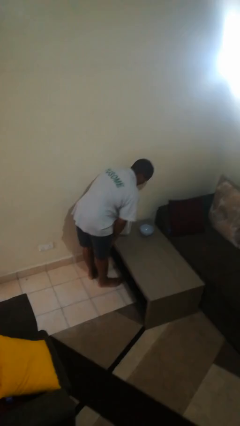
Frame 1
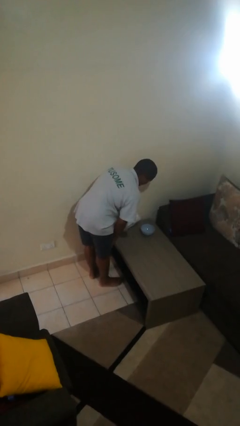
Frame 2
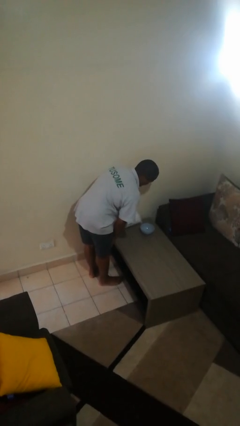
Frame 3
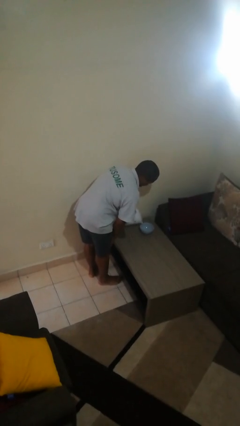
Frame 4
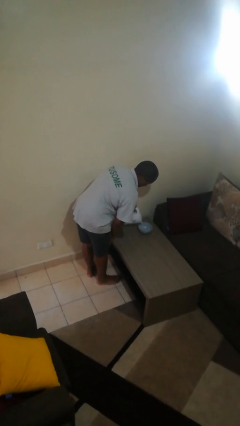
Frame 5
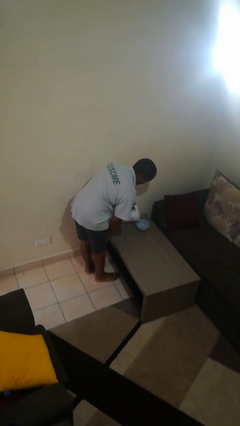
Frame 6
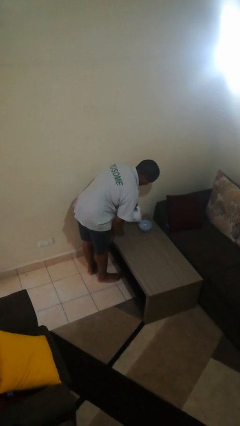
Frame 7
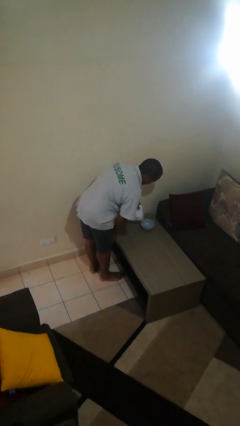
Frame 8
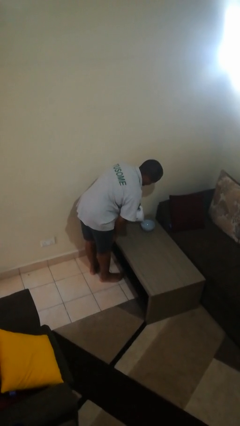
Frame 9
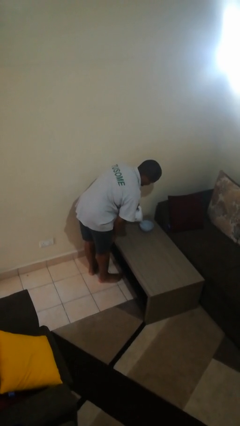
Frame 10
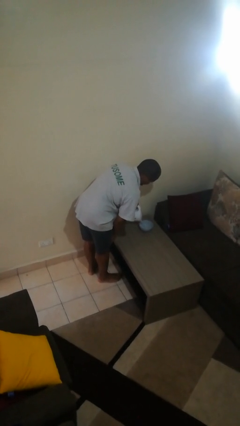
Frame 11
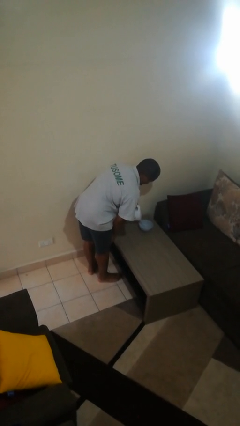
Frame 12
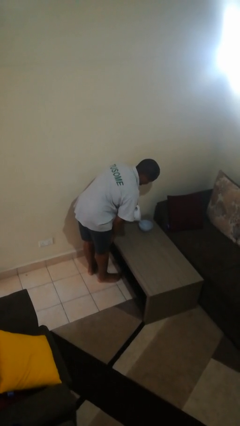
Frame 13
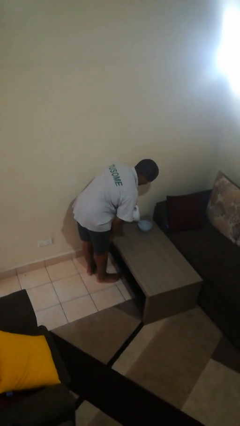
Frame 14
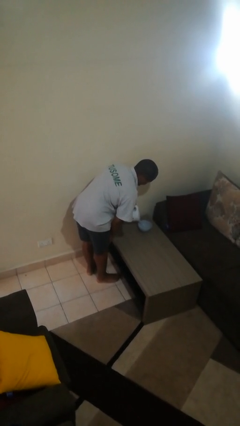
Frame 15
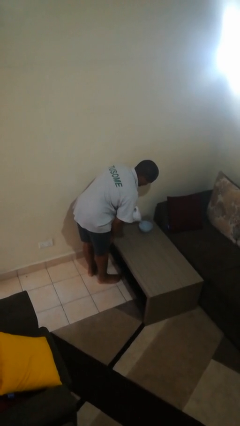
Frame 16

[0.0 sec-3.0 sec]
person pours into bowl

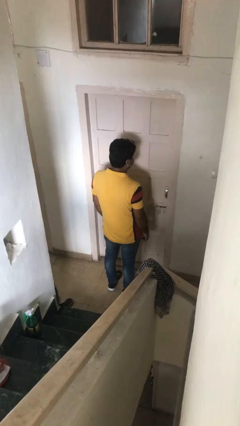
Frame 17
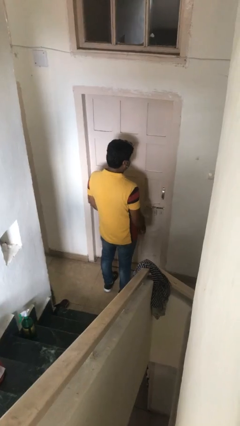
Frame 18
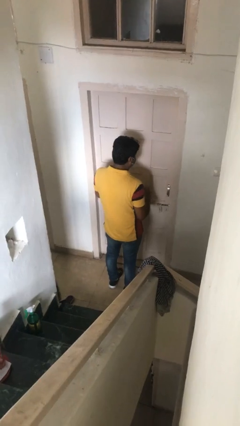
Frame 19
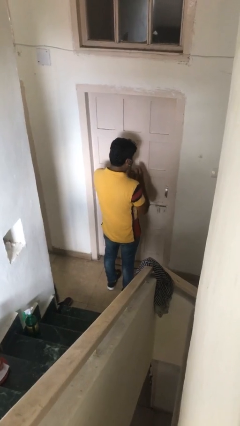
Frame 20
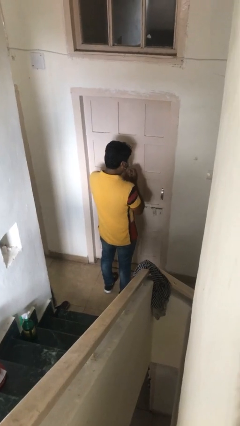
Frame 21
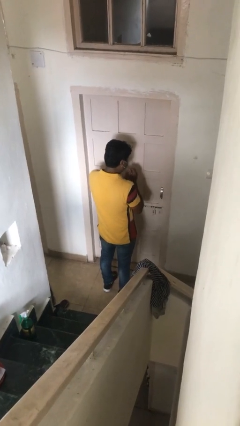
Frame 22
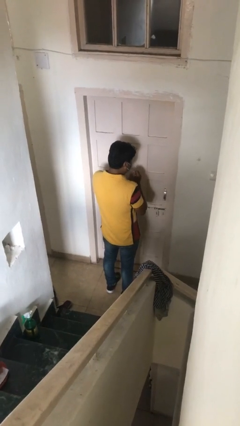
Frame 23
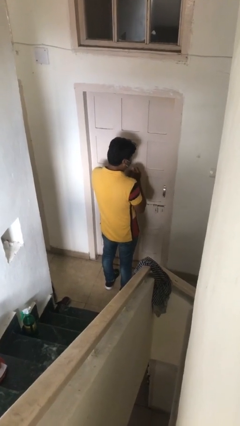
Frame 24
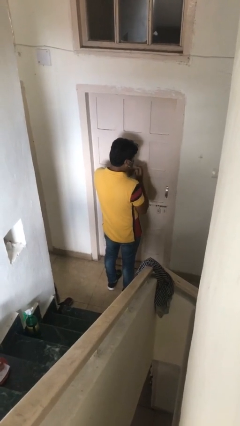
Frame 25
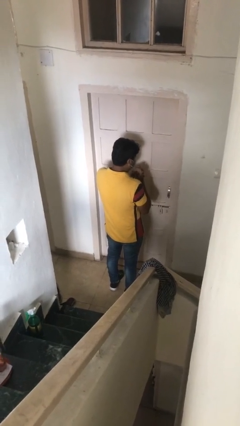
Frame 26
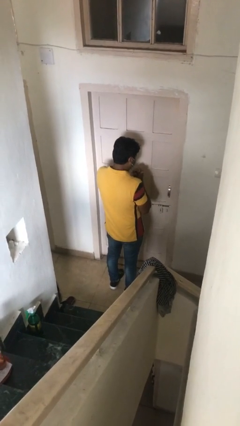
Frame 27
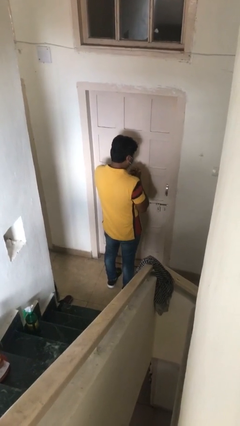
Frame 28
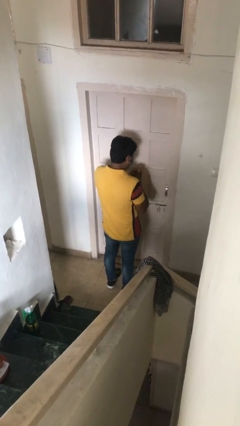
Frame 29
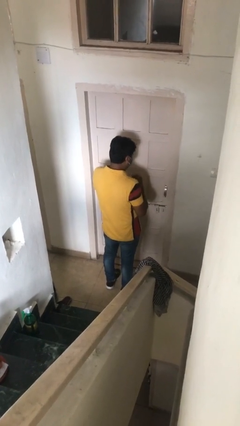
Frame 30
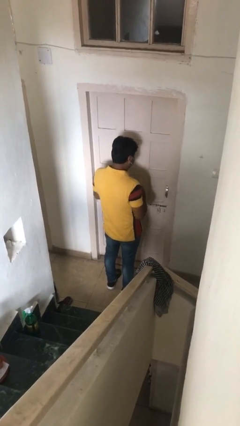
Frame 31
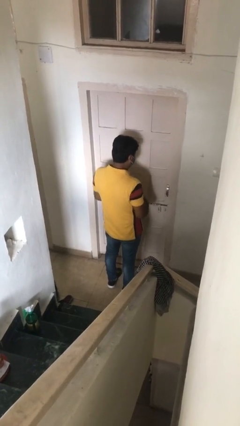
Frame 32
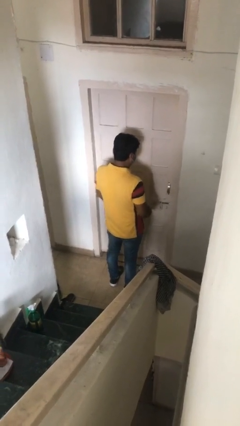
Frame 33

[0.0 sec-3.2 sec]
person cracks knuckles

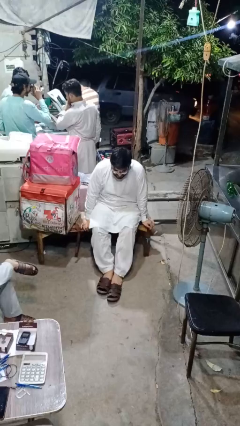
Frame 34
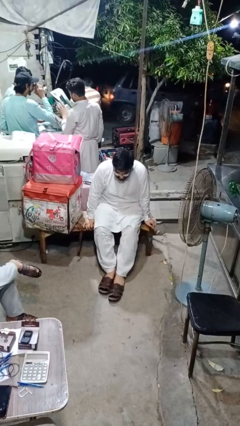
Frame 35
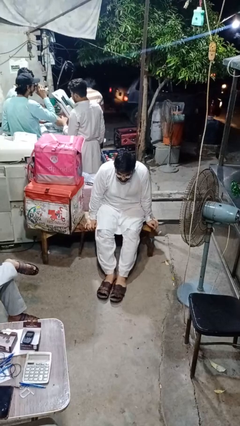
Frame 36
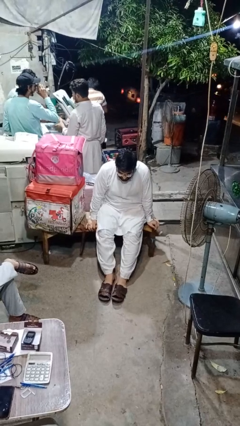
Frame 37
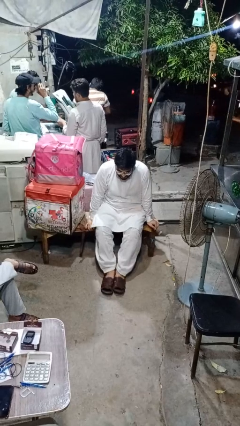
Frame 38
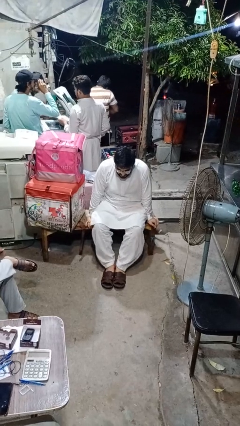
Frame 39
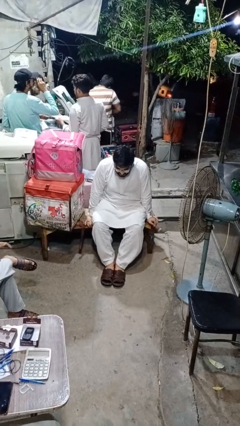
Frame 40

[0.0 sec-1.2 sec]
person puts on shoes

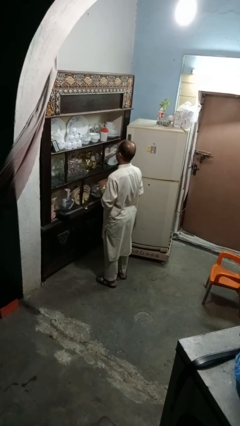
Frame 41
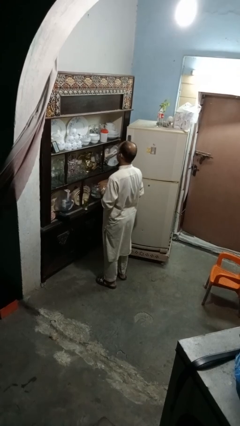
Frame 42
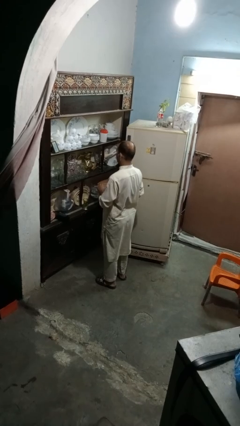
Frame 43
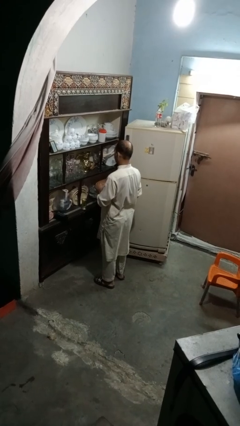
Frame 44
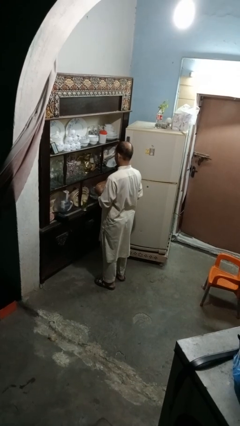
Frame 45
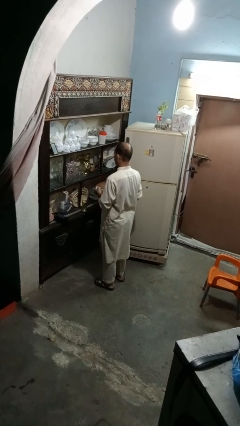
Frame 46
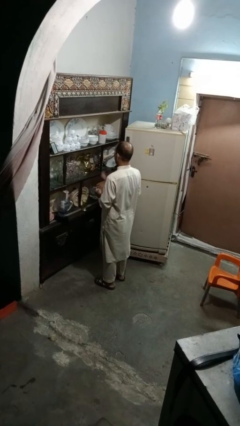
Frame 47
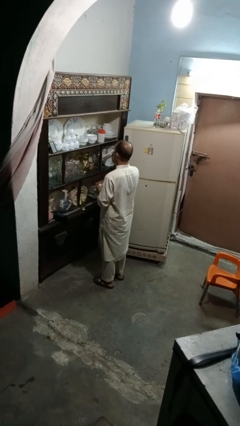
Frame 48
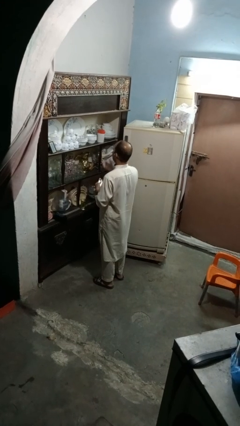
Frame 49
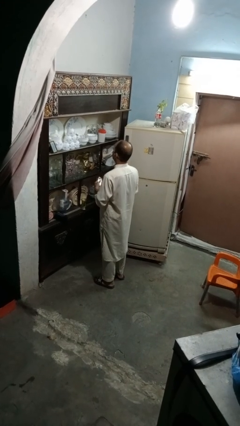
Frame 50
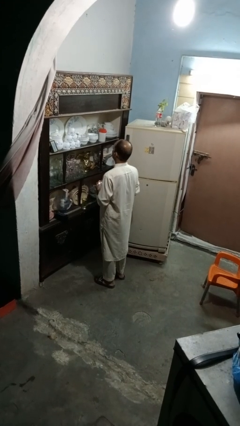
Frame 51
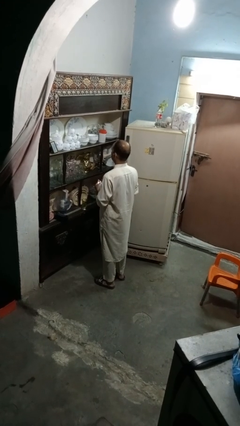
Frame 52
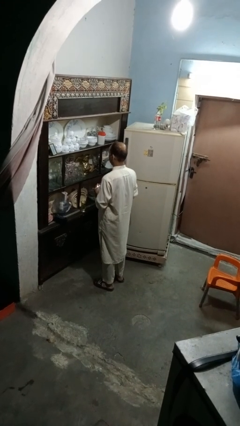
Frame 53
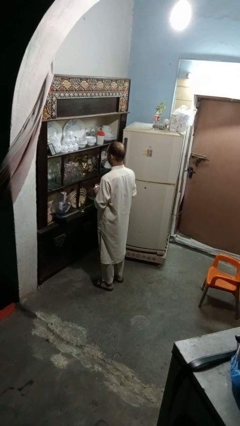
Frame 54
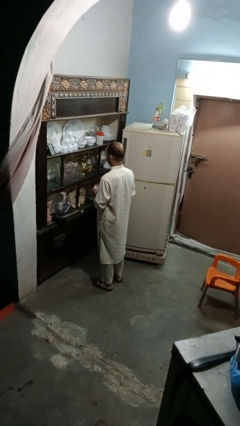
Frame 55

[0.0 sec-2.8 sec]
person takes medicine pills

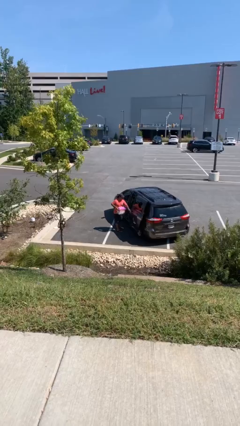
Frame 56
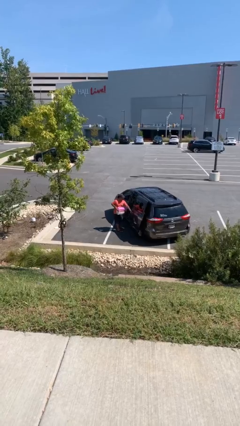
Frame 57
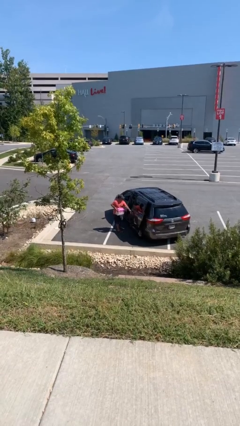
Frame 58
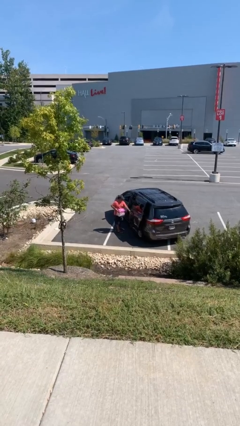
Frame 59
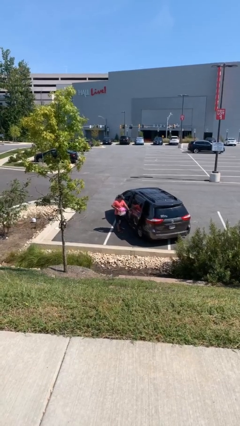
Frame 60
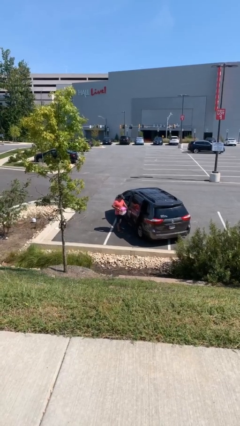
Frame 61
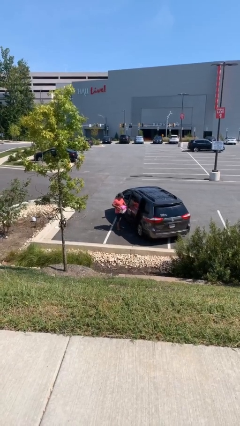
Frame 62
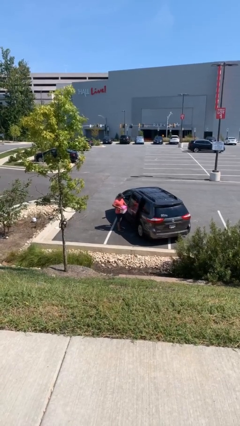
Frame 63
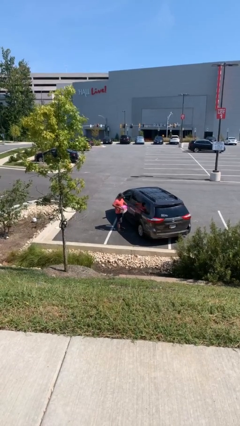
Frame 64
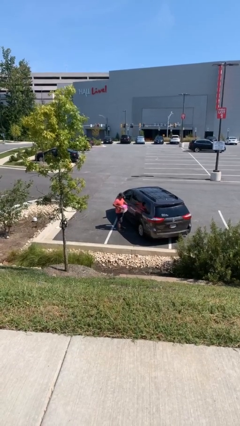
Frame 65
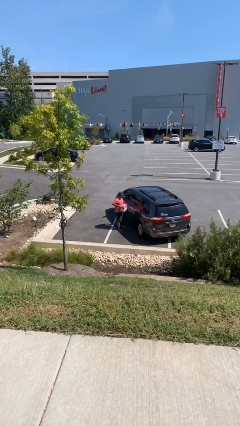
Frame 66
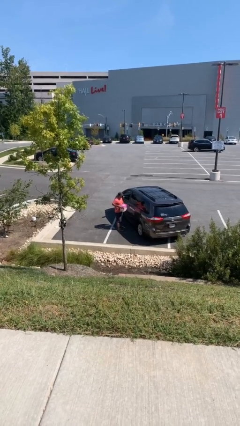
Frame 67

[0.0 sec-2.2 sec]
person closes car door

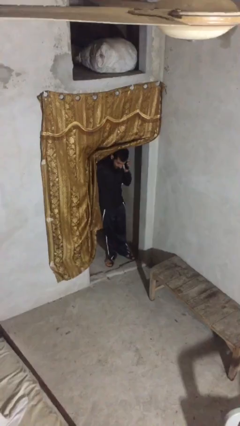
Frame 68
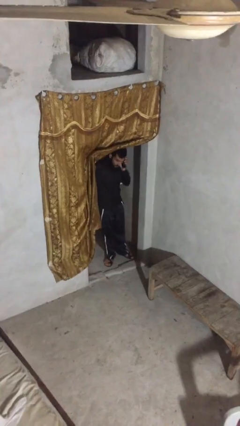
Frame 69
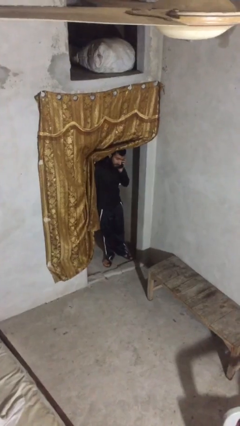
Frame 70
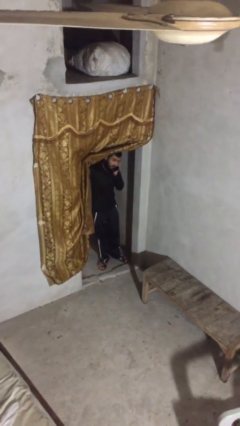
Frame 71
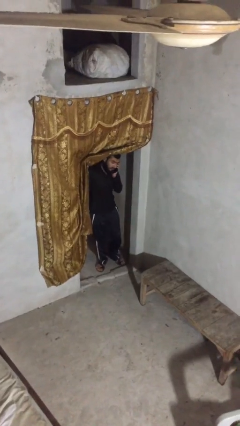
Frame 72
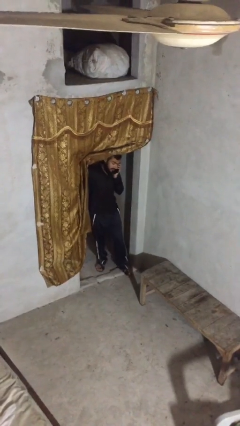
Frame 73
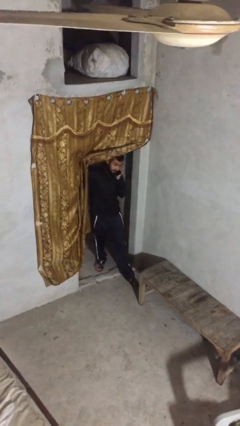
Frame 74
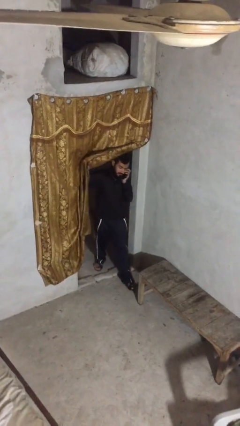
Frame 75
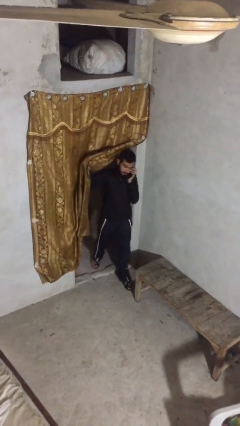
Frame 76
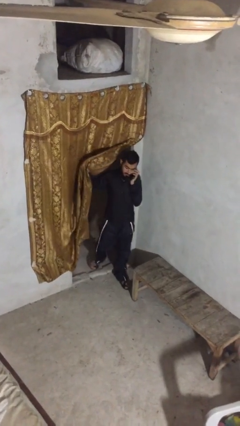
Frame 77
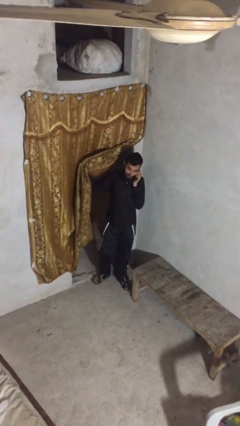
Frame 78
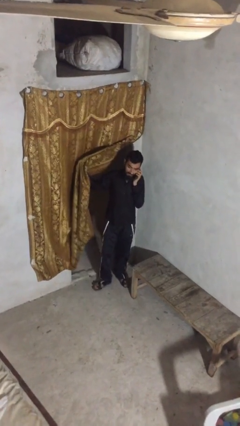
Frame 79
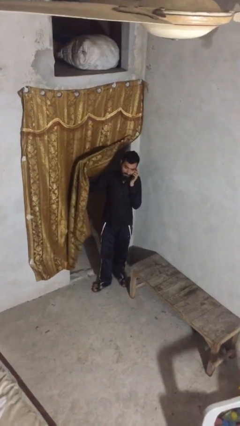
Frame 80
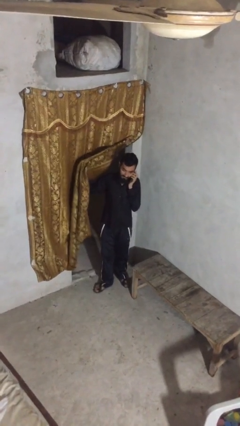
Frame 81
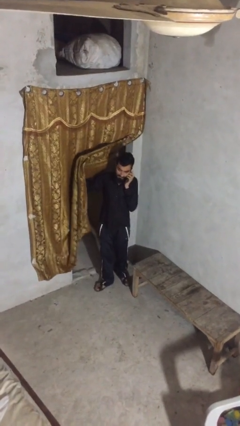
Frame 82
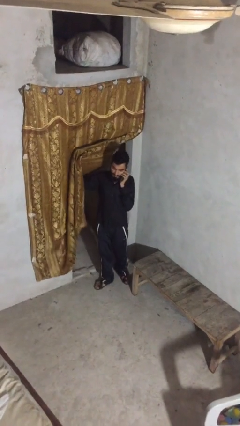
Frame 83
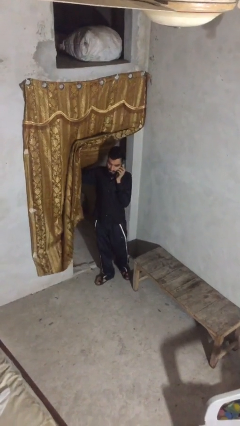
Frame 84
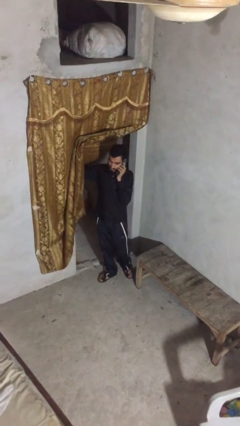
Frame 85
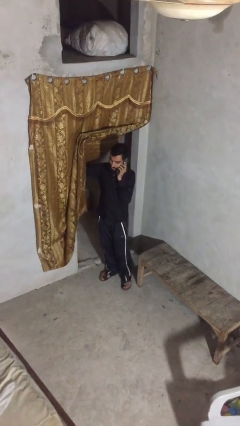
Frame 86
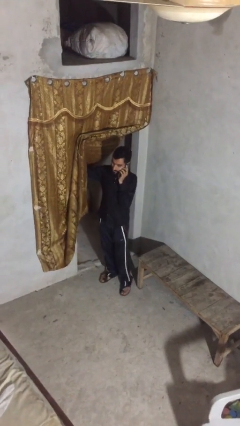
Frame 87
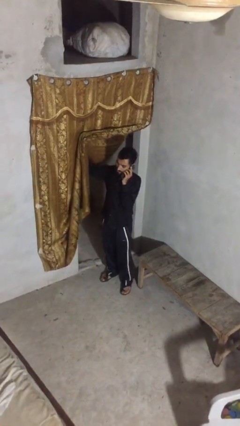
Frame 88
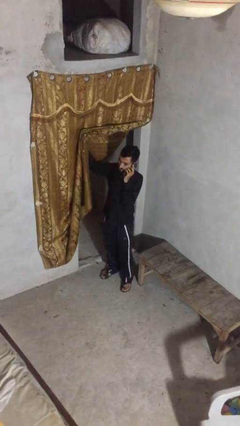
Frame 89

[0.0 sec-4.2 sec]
person enters scene through structure

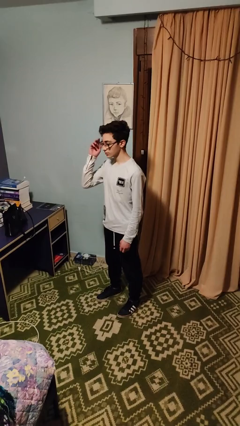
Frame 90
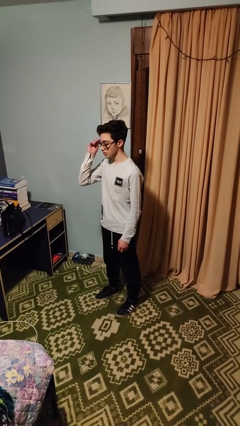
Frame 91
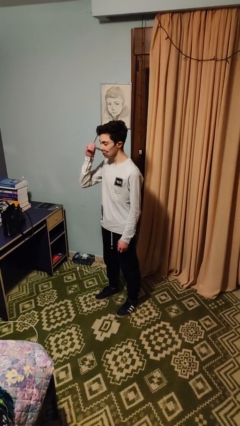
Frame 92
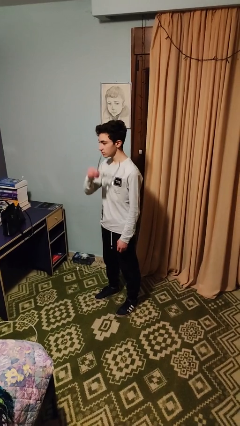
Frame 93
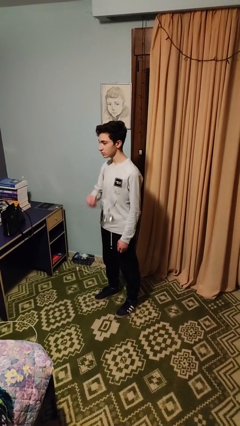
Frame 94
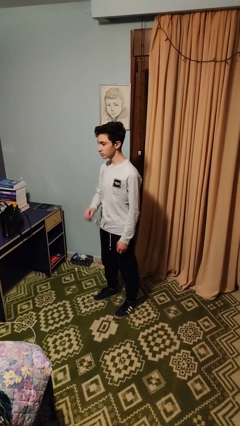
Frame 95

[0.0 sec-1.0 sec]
person takes off glasses
